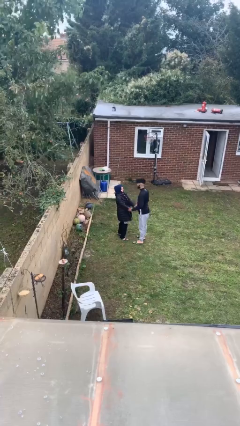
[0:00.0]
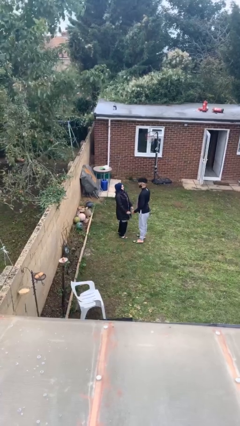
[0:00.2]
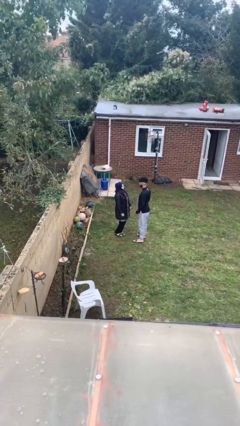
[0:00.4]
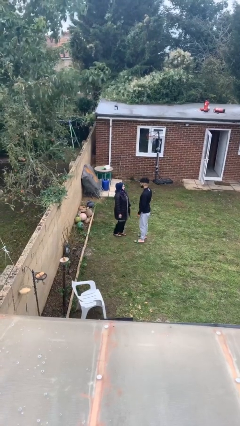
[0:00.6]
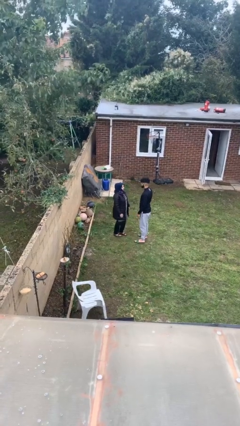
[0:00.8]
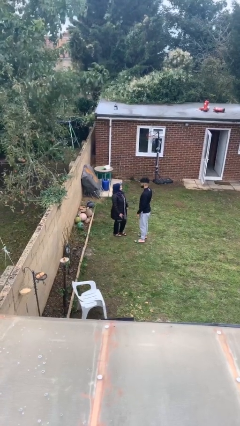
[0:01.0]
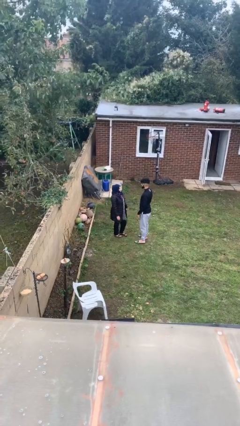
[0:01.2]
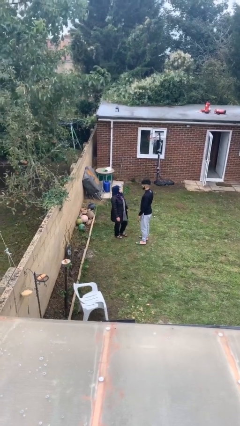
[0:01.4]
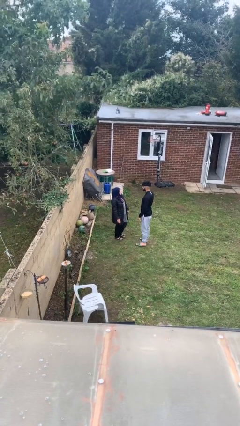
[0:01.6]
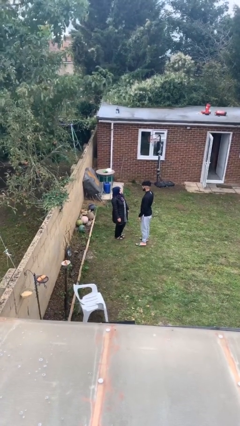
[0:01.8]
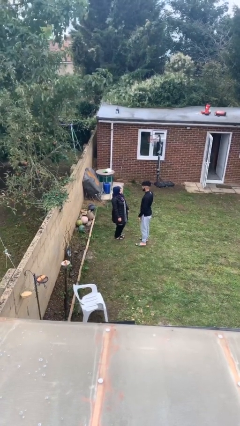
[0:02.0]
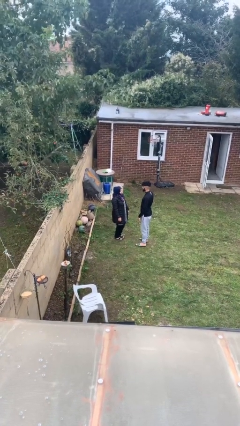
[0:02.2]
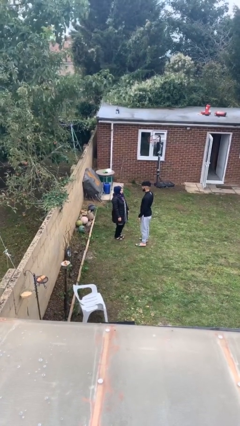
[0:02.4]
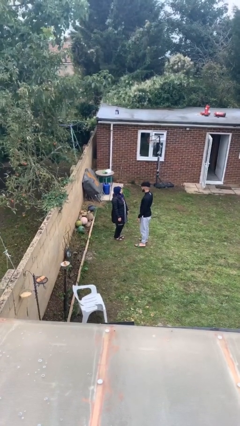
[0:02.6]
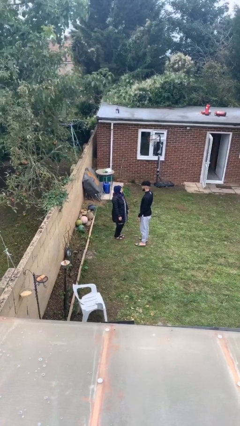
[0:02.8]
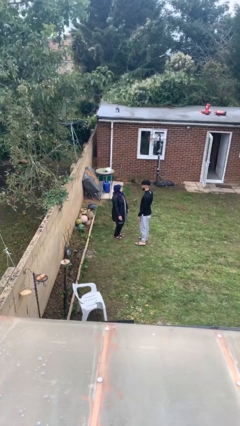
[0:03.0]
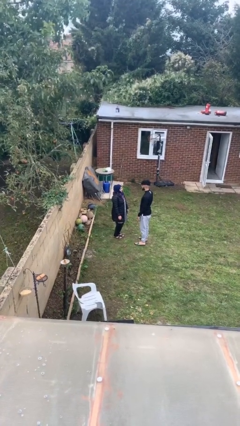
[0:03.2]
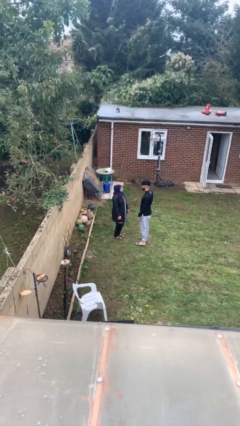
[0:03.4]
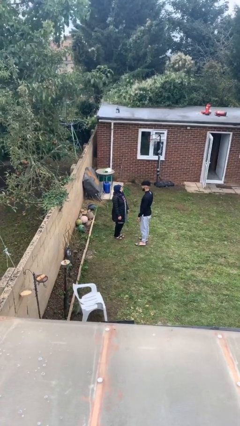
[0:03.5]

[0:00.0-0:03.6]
person talks to person

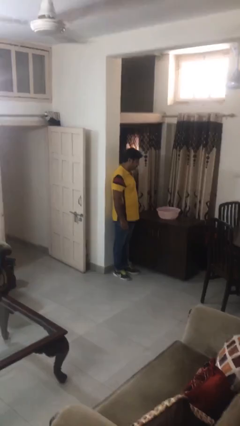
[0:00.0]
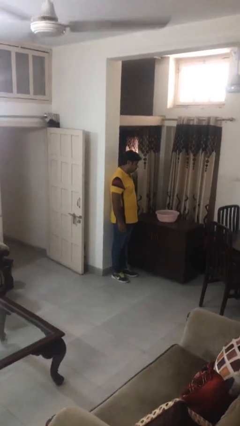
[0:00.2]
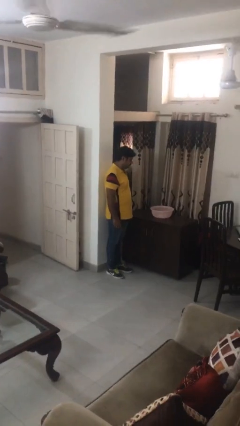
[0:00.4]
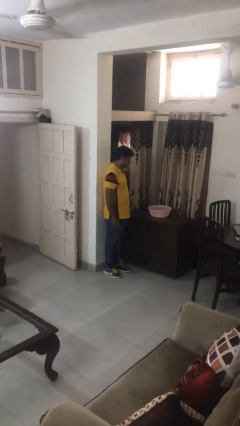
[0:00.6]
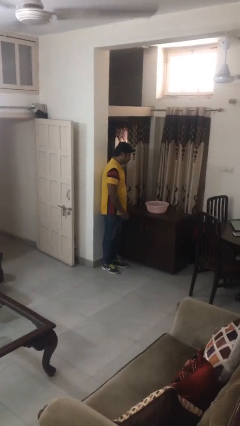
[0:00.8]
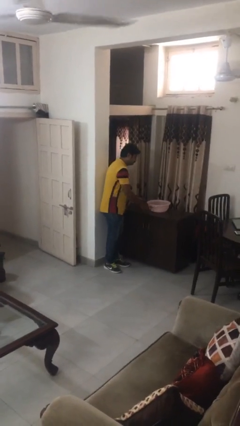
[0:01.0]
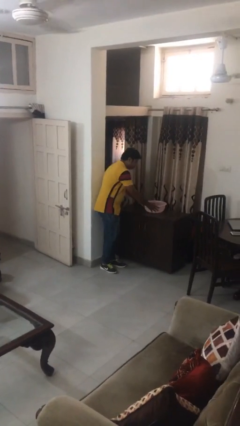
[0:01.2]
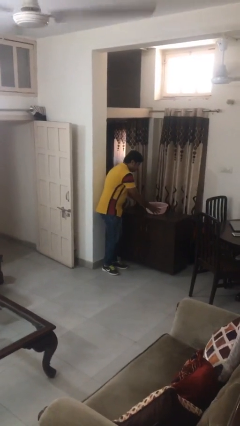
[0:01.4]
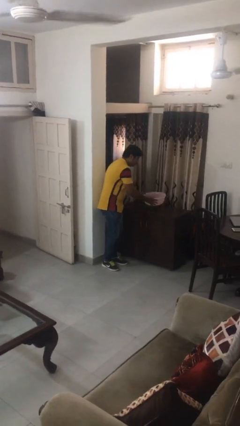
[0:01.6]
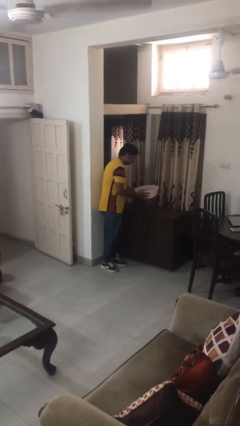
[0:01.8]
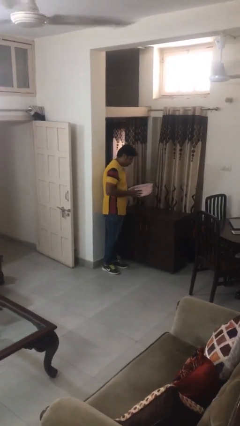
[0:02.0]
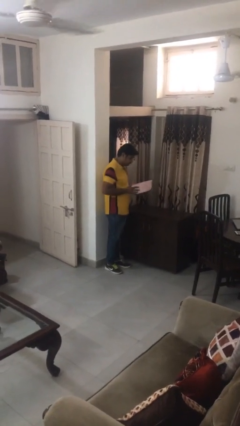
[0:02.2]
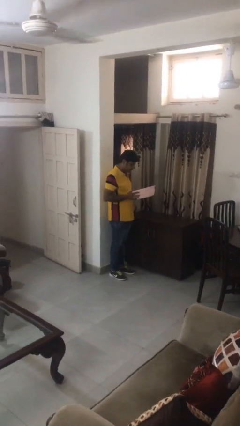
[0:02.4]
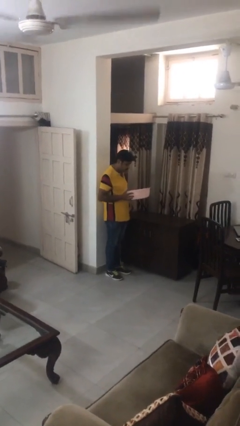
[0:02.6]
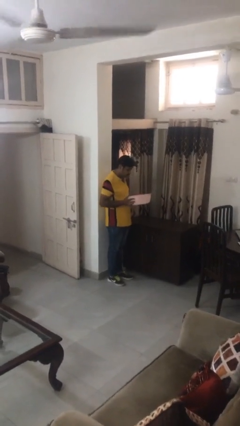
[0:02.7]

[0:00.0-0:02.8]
person picks up object from countertop

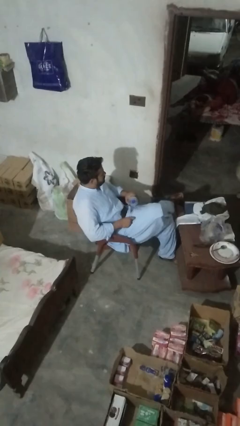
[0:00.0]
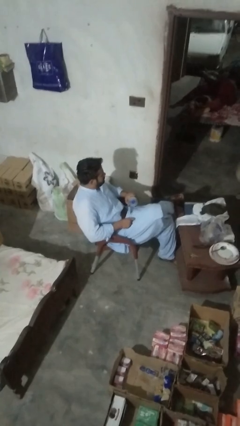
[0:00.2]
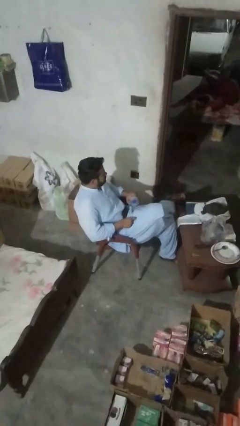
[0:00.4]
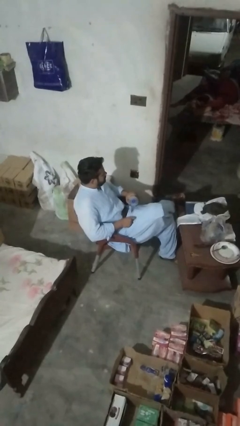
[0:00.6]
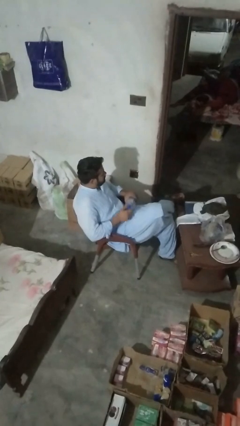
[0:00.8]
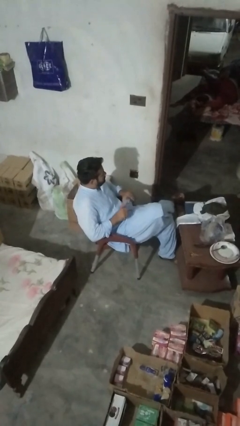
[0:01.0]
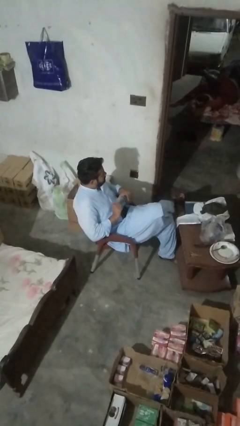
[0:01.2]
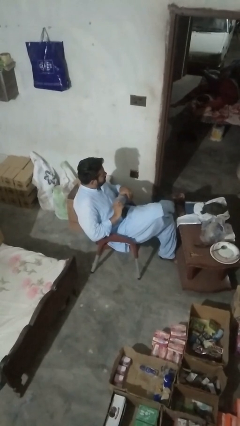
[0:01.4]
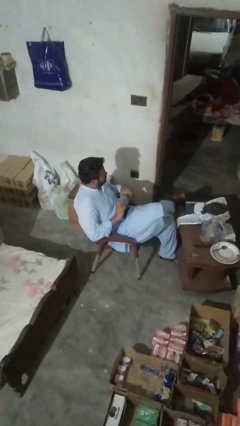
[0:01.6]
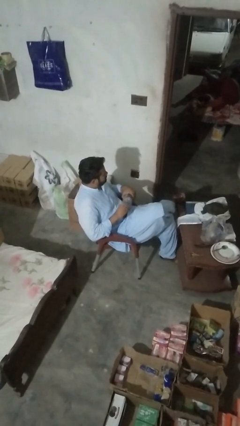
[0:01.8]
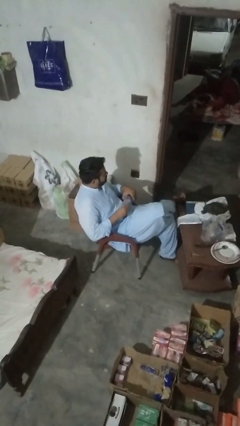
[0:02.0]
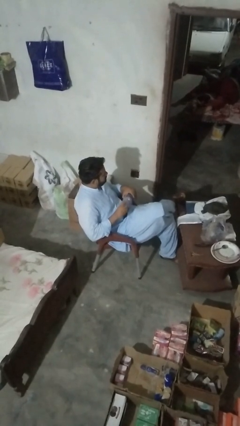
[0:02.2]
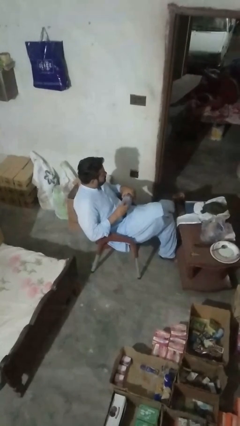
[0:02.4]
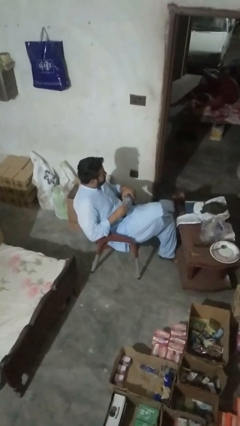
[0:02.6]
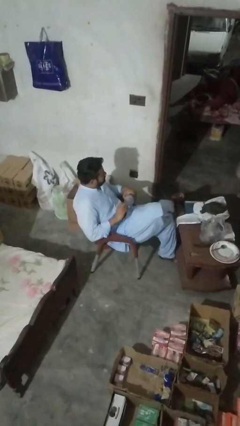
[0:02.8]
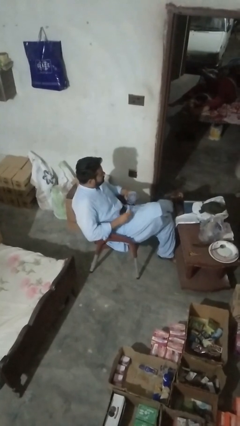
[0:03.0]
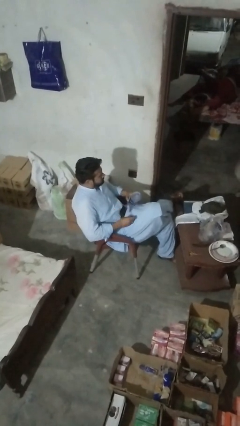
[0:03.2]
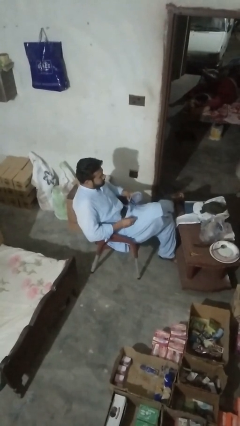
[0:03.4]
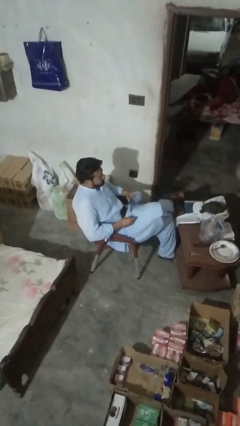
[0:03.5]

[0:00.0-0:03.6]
person unscrews lid from bottle

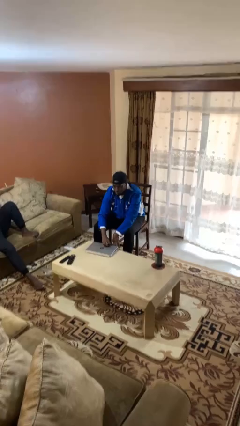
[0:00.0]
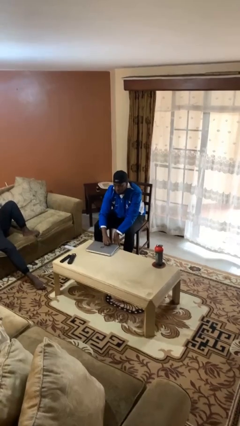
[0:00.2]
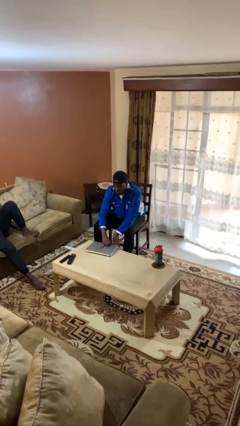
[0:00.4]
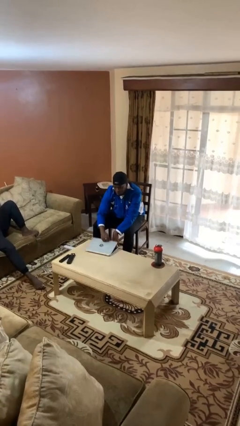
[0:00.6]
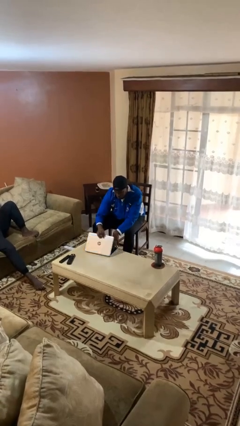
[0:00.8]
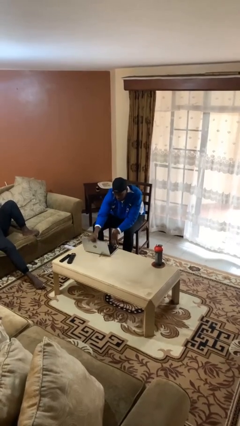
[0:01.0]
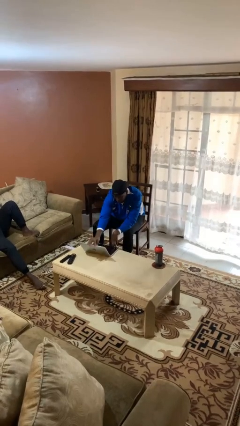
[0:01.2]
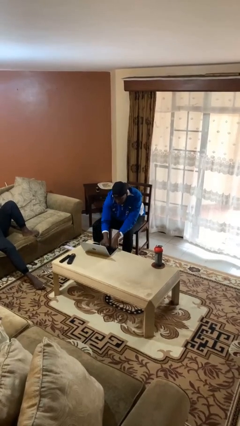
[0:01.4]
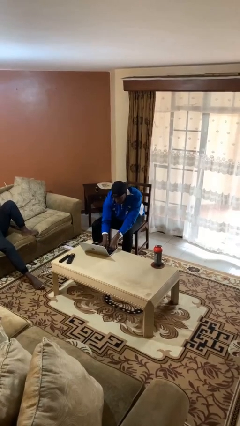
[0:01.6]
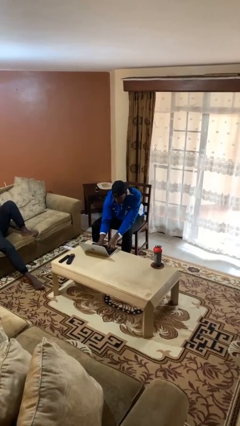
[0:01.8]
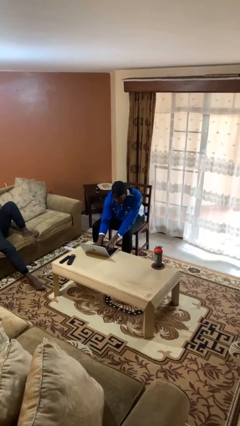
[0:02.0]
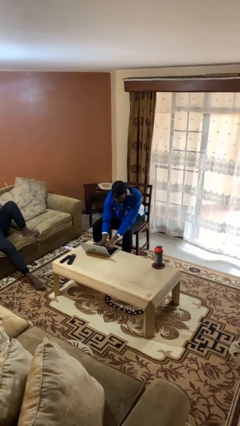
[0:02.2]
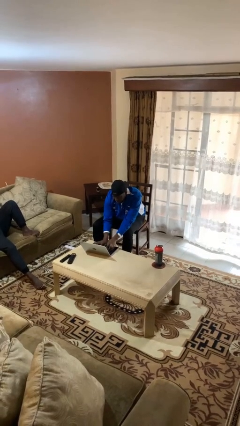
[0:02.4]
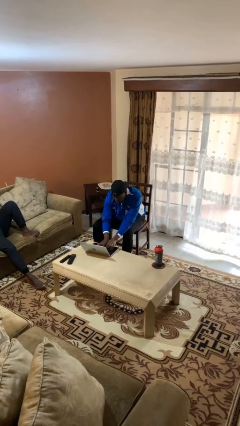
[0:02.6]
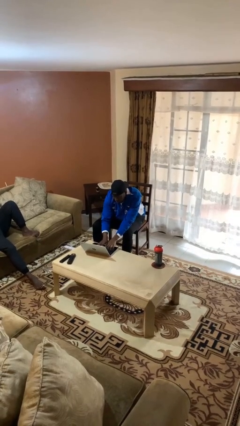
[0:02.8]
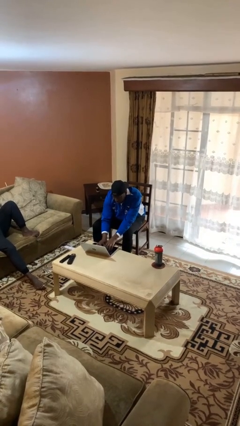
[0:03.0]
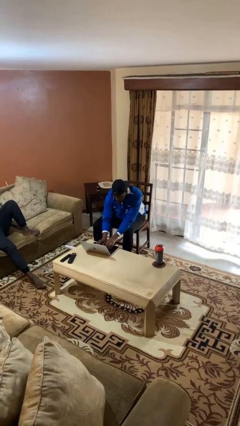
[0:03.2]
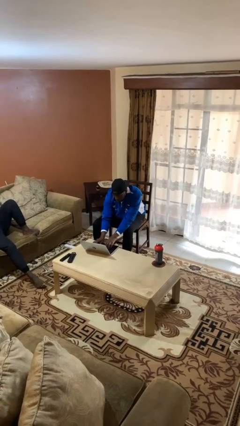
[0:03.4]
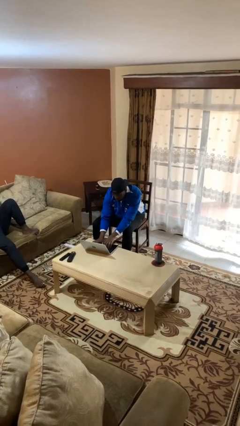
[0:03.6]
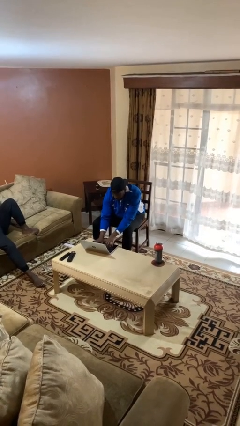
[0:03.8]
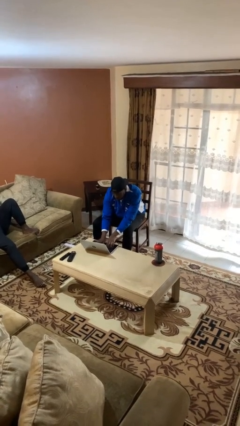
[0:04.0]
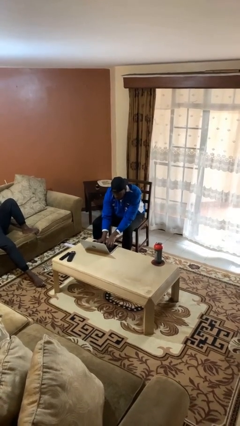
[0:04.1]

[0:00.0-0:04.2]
person interacts with laptop

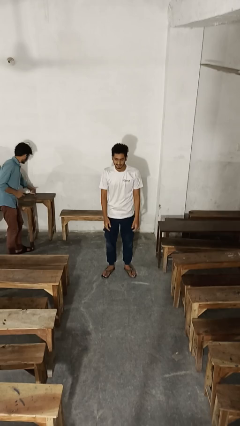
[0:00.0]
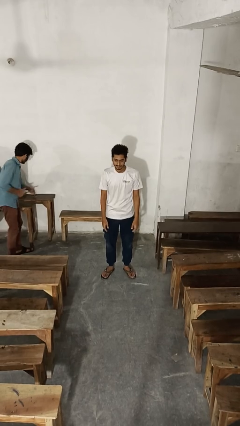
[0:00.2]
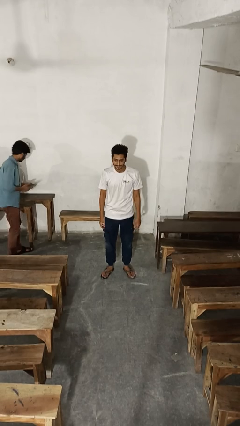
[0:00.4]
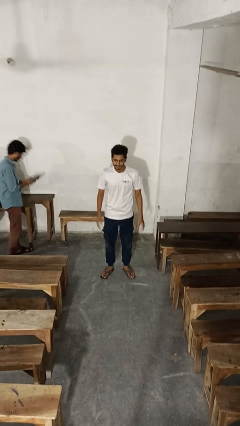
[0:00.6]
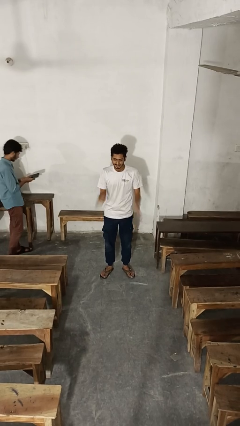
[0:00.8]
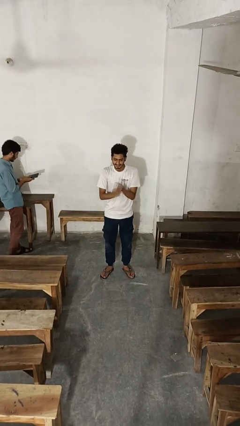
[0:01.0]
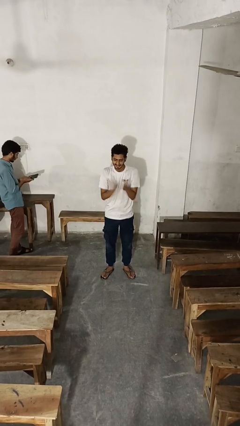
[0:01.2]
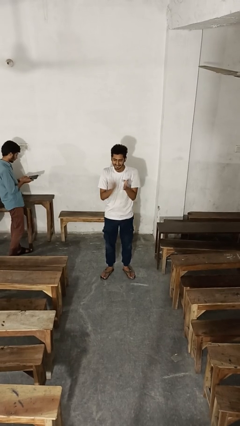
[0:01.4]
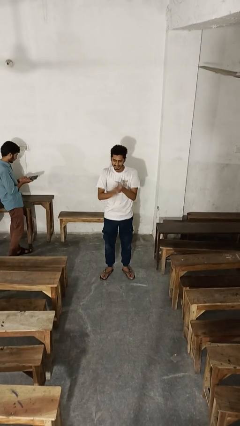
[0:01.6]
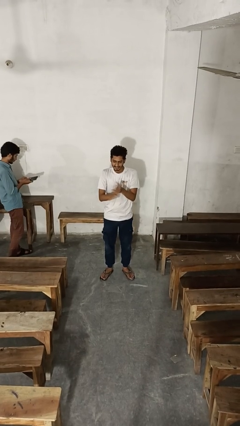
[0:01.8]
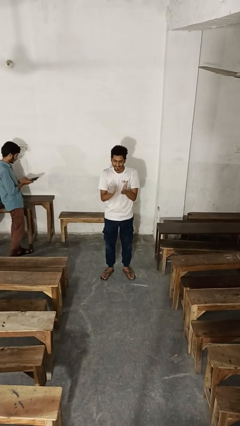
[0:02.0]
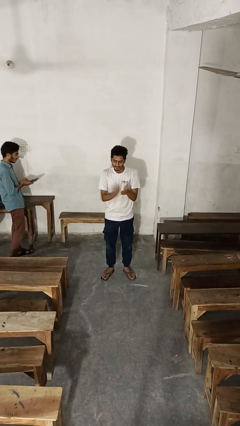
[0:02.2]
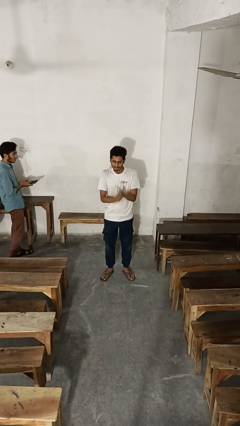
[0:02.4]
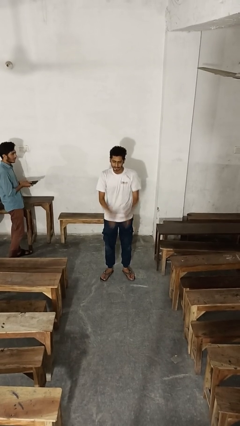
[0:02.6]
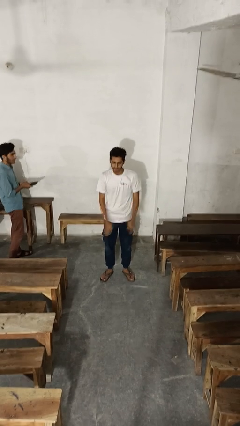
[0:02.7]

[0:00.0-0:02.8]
person claps hands

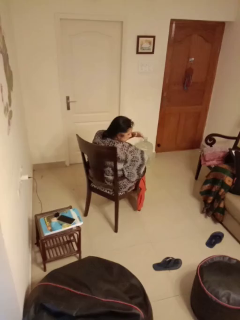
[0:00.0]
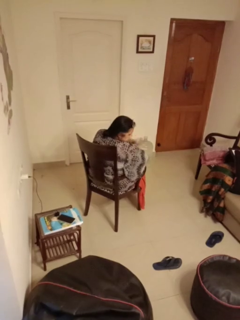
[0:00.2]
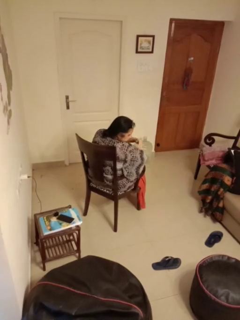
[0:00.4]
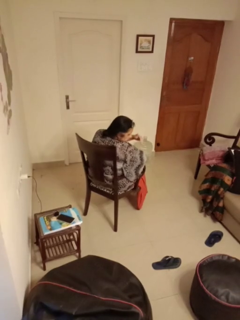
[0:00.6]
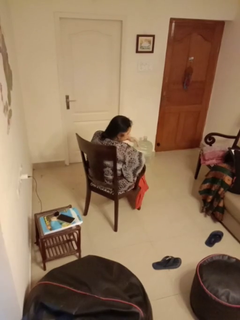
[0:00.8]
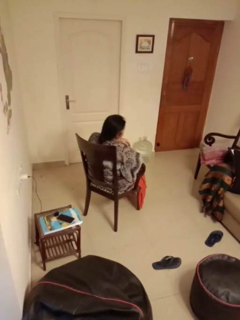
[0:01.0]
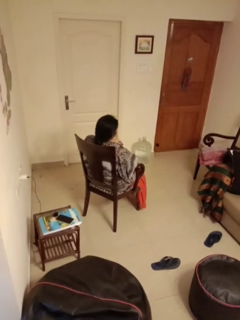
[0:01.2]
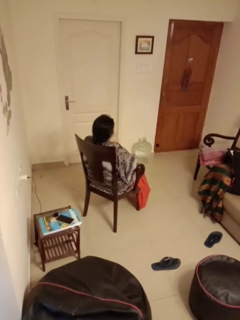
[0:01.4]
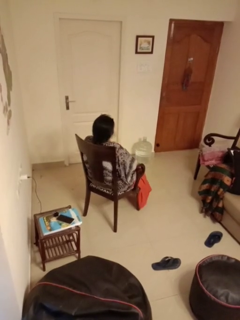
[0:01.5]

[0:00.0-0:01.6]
person swats bug
